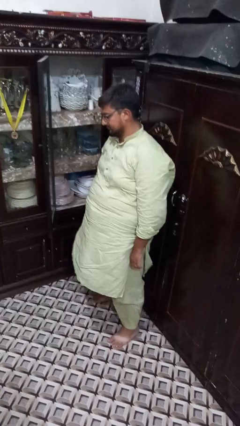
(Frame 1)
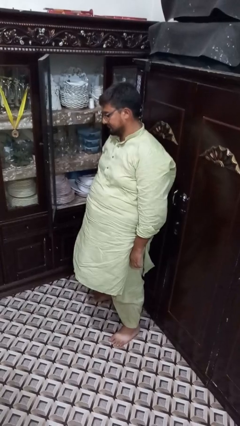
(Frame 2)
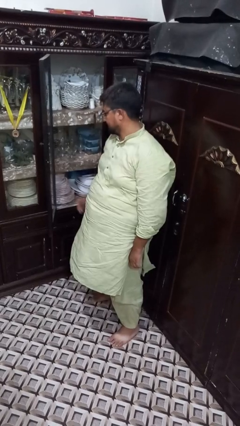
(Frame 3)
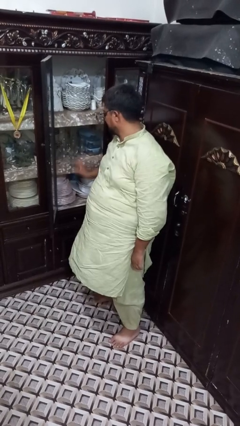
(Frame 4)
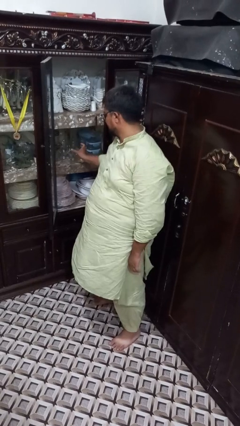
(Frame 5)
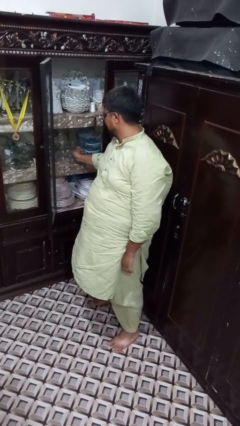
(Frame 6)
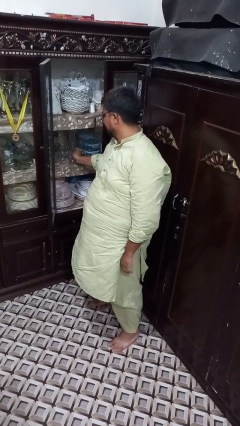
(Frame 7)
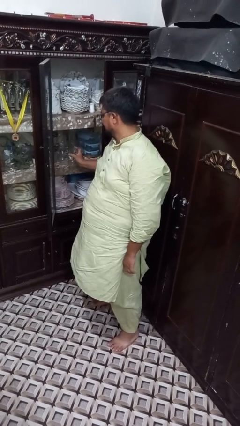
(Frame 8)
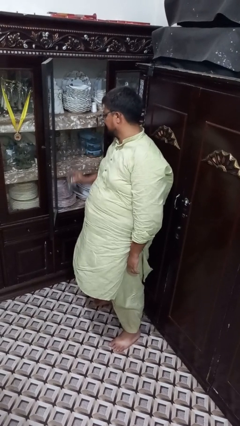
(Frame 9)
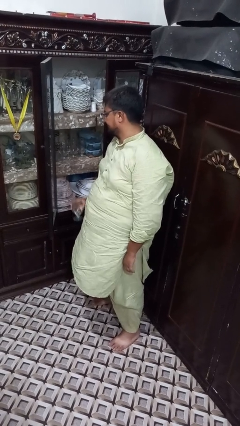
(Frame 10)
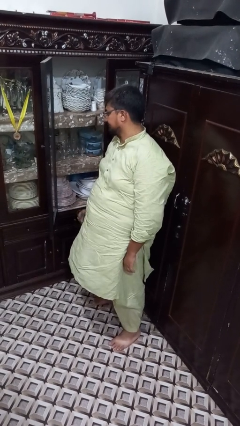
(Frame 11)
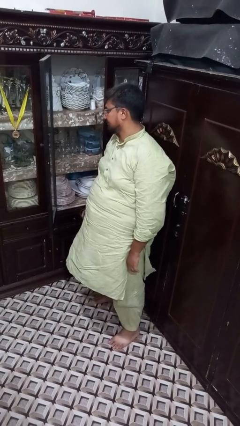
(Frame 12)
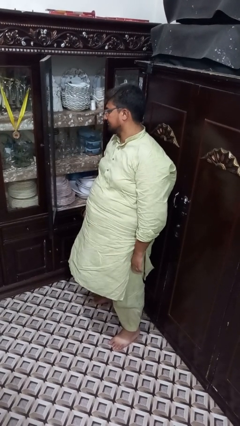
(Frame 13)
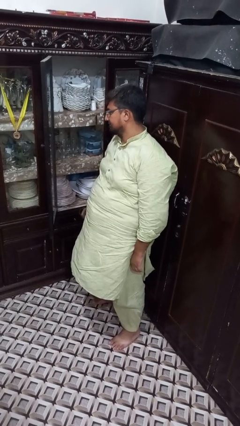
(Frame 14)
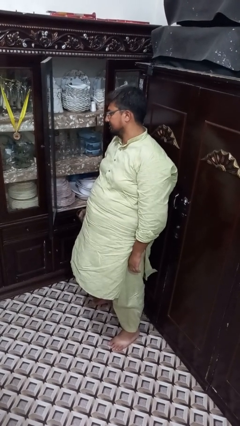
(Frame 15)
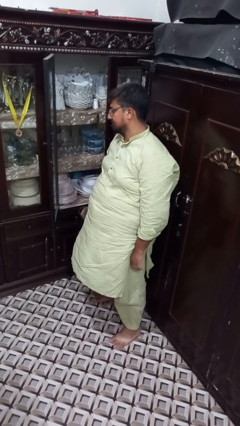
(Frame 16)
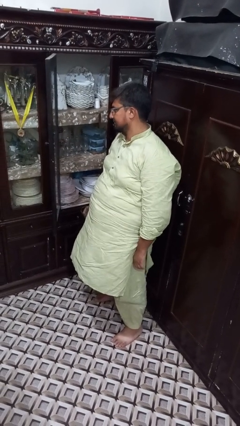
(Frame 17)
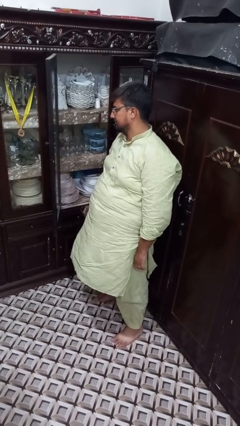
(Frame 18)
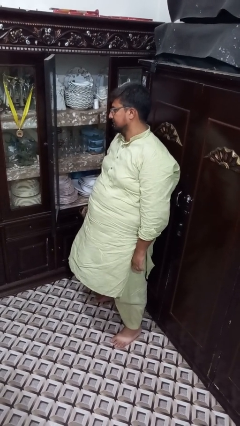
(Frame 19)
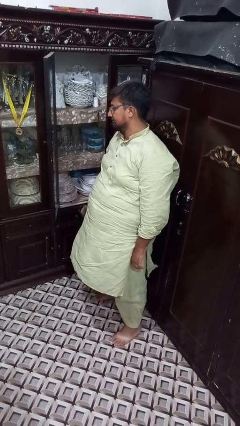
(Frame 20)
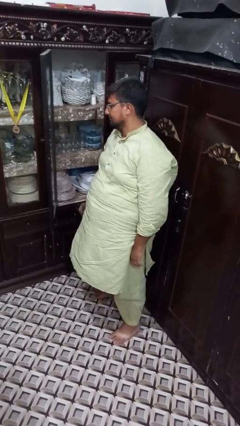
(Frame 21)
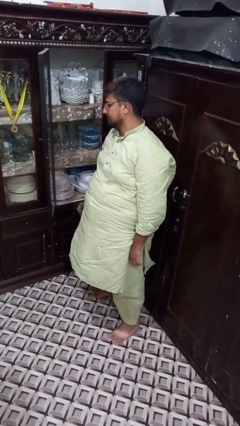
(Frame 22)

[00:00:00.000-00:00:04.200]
person picks up object from countertop

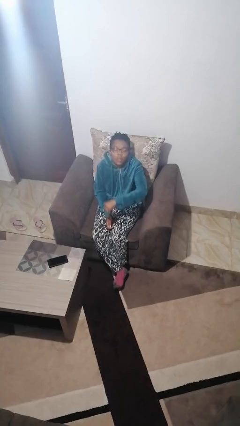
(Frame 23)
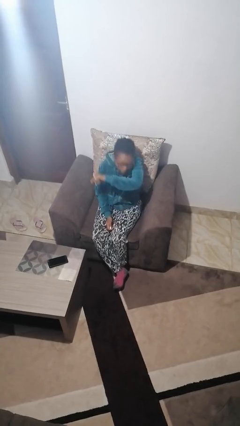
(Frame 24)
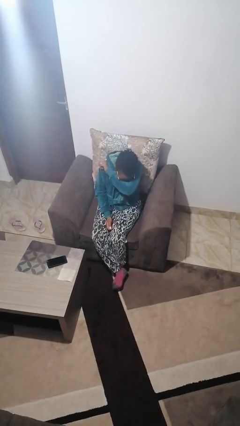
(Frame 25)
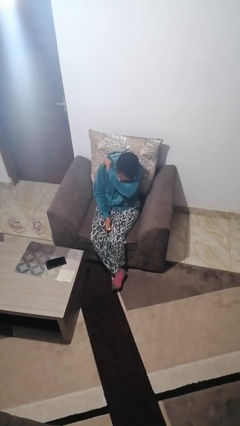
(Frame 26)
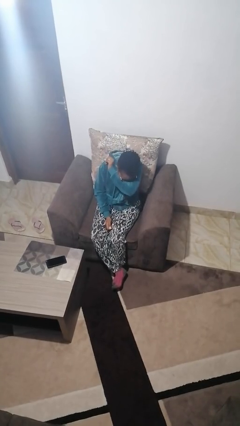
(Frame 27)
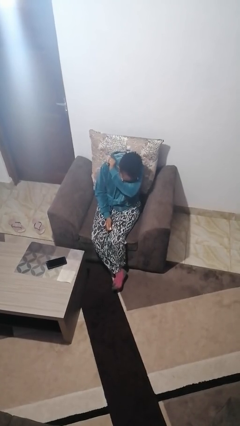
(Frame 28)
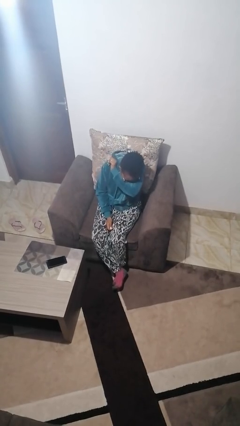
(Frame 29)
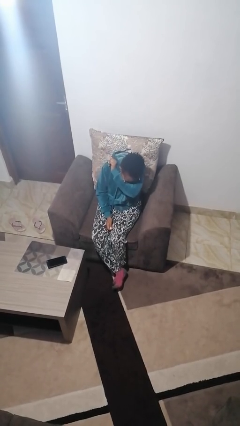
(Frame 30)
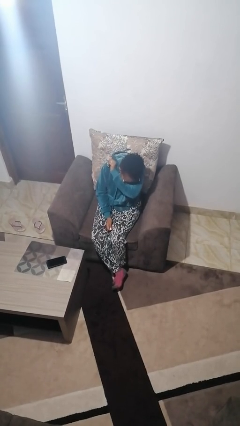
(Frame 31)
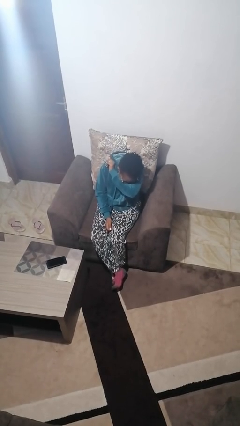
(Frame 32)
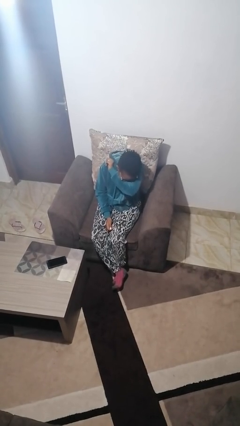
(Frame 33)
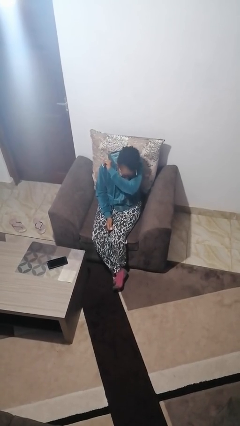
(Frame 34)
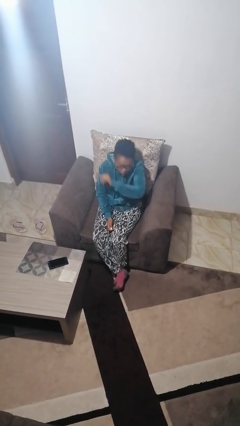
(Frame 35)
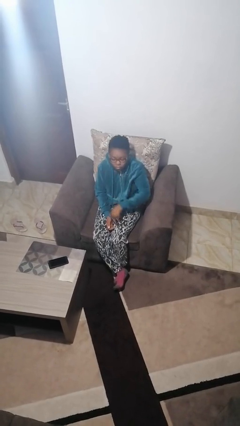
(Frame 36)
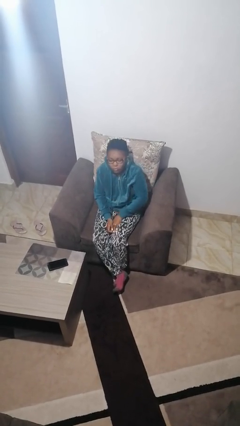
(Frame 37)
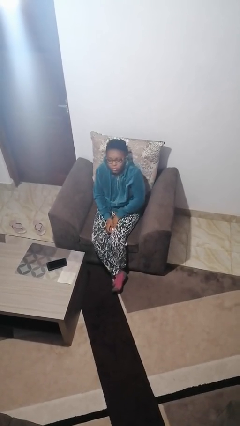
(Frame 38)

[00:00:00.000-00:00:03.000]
person sneezes into arm

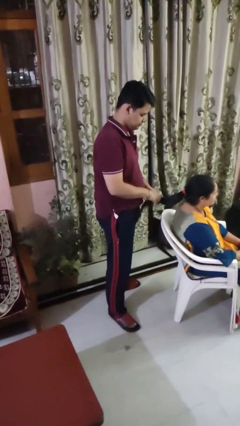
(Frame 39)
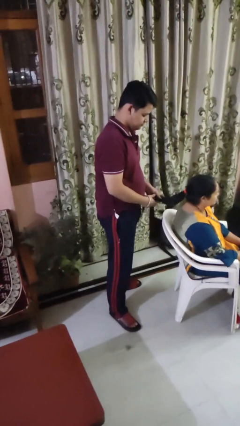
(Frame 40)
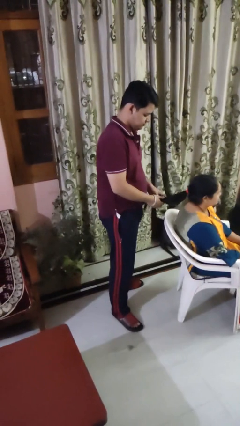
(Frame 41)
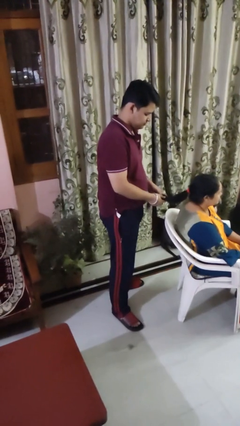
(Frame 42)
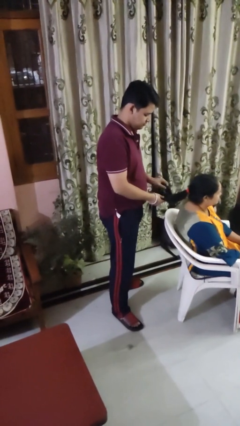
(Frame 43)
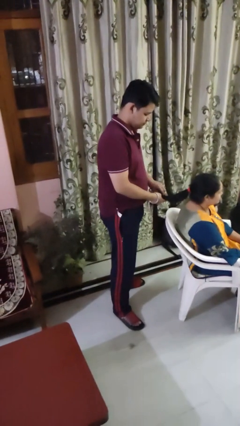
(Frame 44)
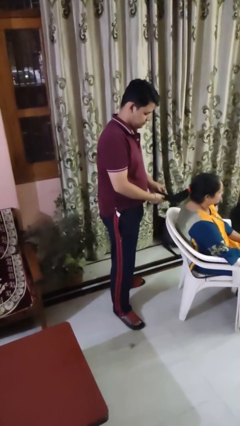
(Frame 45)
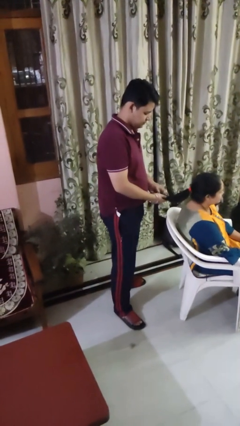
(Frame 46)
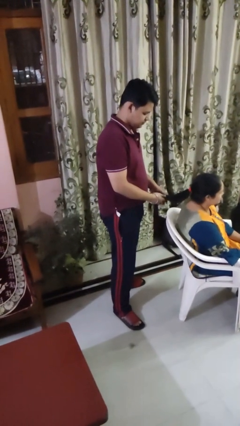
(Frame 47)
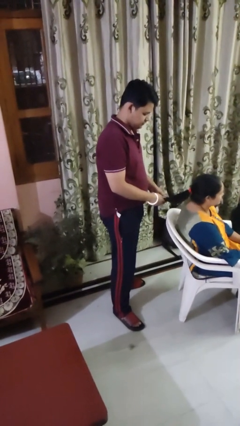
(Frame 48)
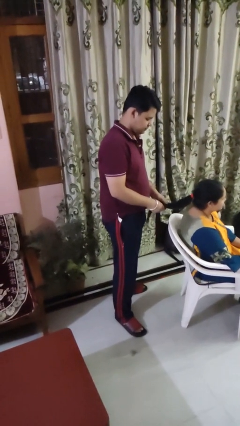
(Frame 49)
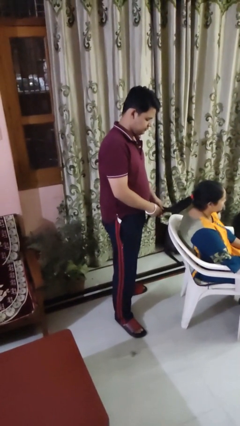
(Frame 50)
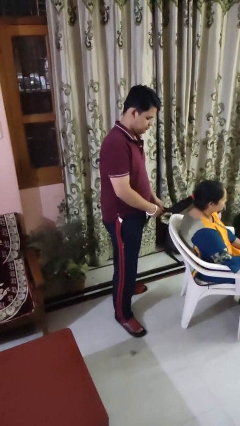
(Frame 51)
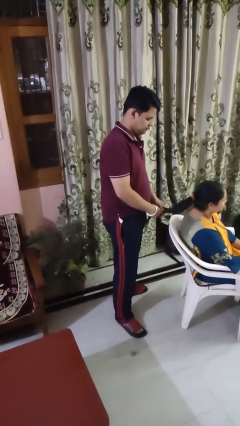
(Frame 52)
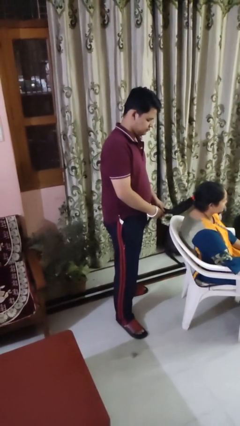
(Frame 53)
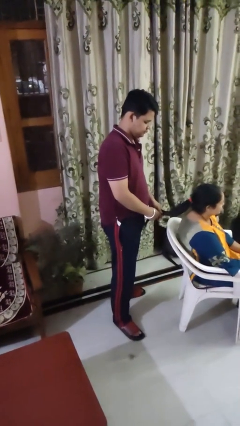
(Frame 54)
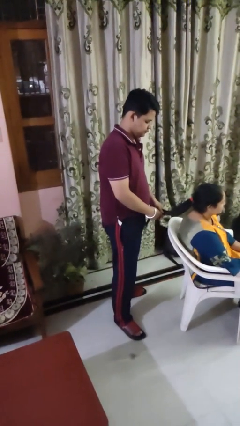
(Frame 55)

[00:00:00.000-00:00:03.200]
person braids hair of person

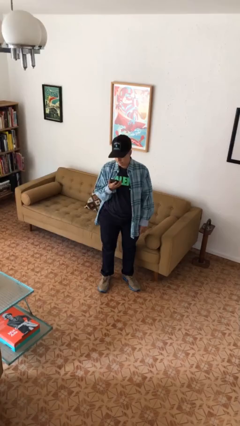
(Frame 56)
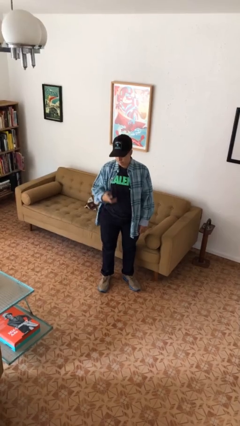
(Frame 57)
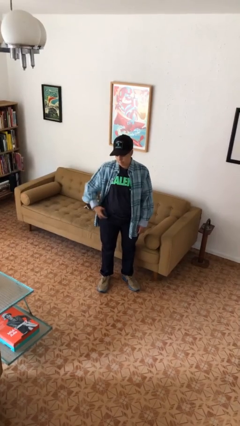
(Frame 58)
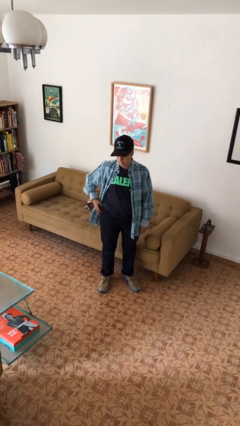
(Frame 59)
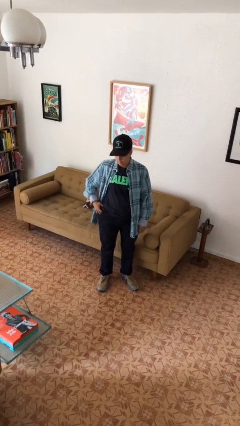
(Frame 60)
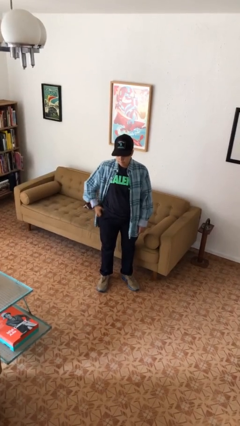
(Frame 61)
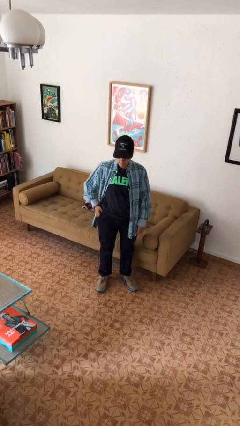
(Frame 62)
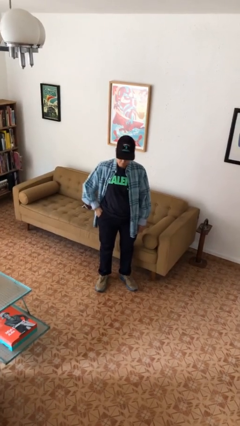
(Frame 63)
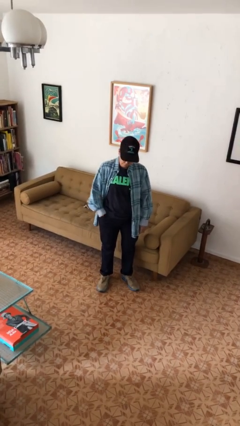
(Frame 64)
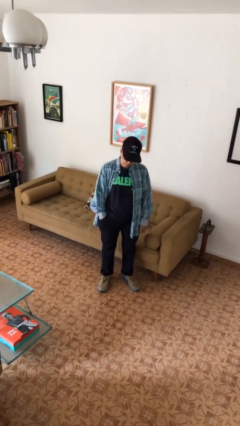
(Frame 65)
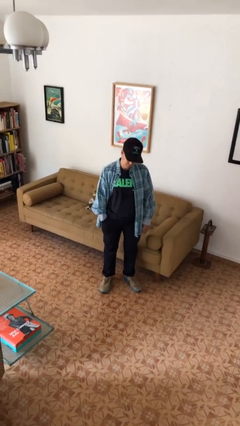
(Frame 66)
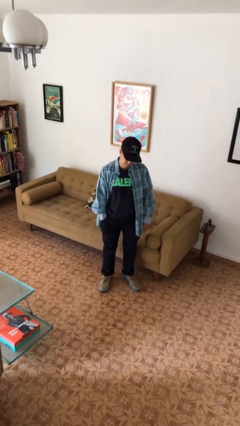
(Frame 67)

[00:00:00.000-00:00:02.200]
person puts phone into pocket

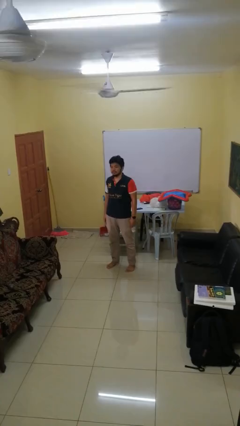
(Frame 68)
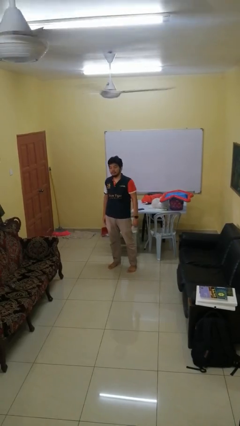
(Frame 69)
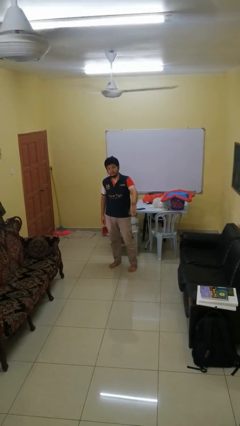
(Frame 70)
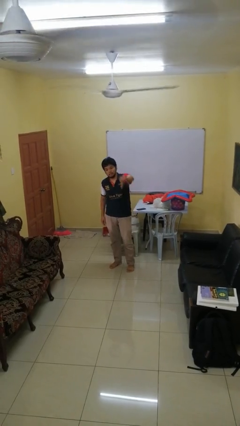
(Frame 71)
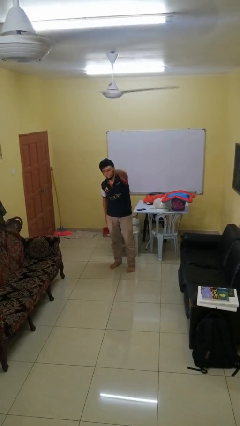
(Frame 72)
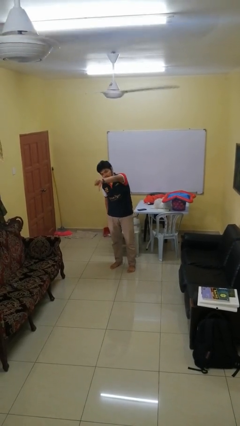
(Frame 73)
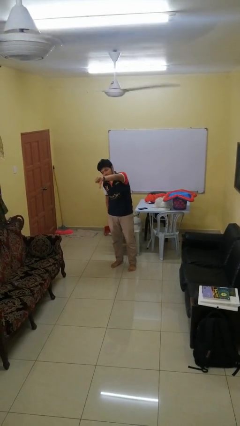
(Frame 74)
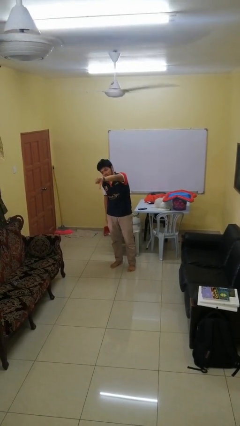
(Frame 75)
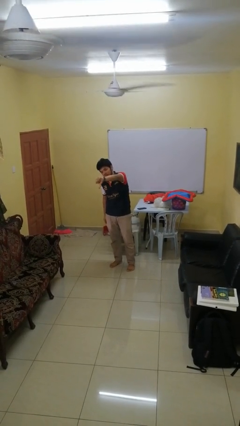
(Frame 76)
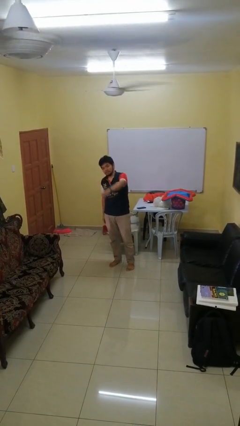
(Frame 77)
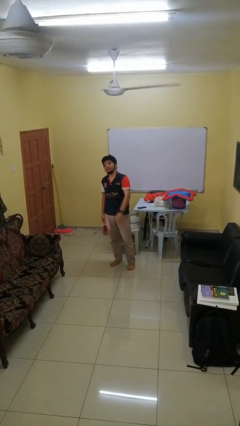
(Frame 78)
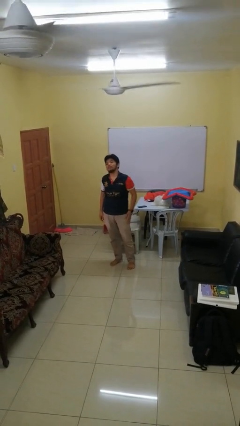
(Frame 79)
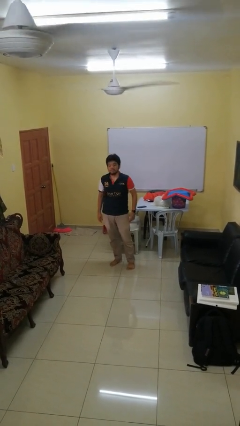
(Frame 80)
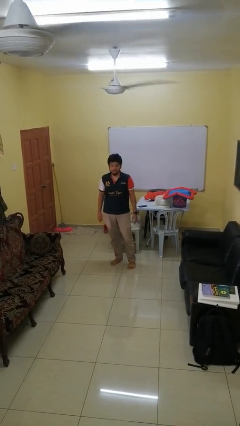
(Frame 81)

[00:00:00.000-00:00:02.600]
person gestures thumbs down

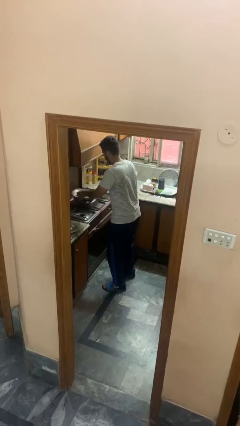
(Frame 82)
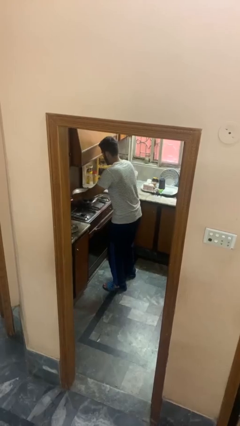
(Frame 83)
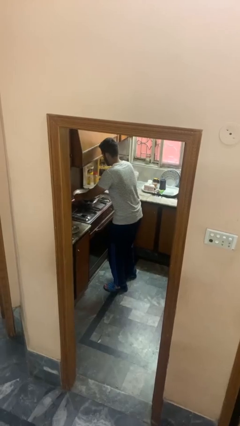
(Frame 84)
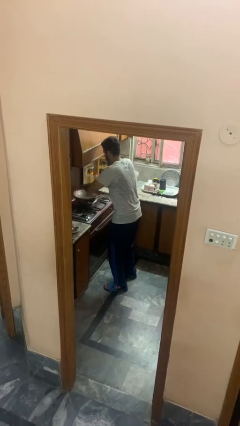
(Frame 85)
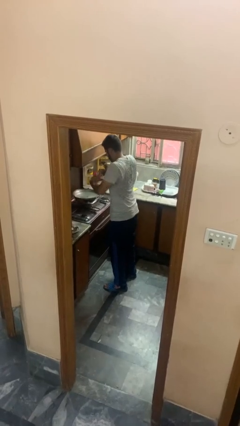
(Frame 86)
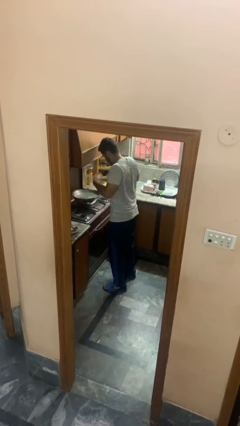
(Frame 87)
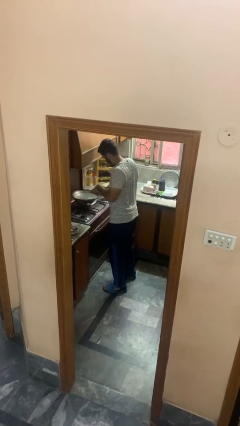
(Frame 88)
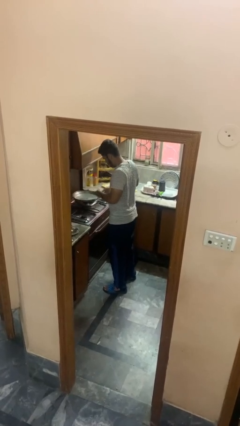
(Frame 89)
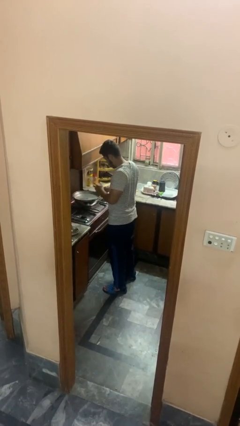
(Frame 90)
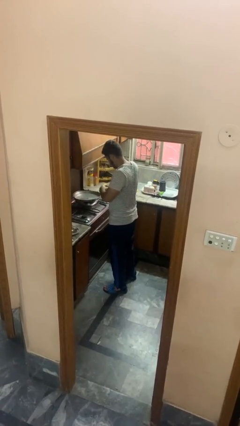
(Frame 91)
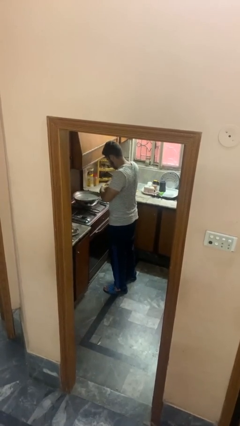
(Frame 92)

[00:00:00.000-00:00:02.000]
person burns hand
